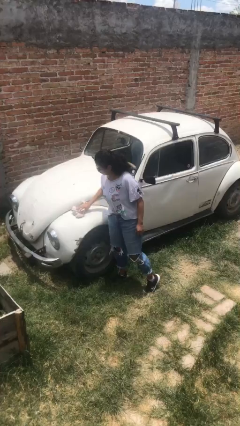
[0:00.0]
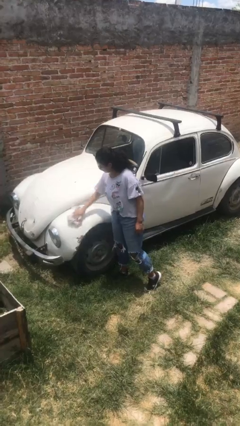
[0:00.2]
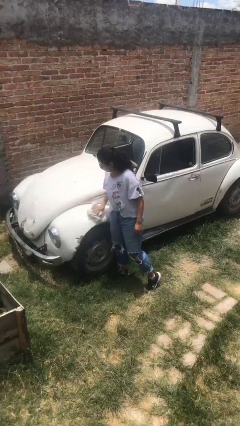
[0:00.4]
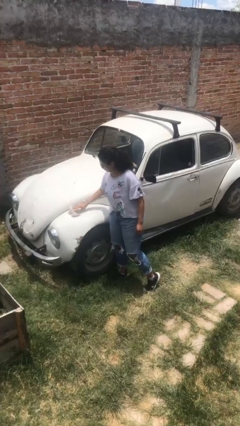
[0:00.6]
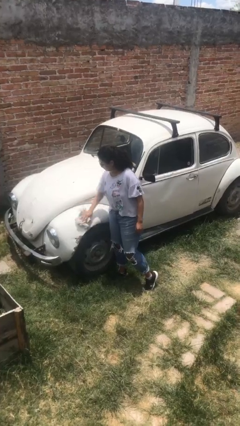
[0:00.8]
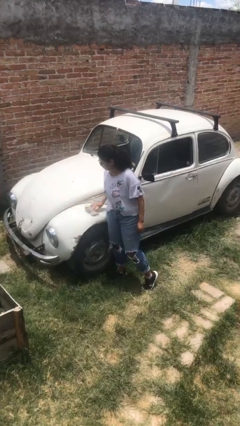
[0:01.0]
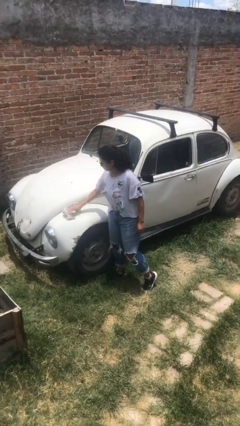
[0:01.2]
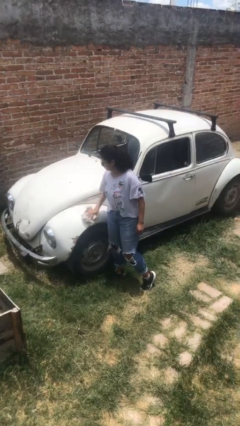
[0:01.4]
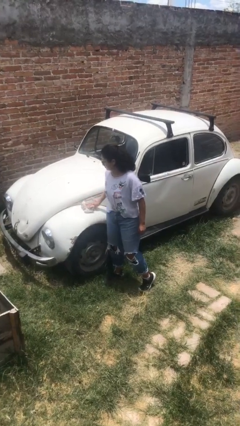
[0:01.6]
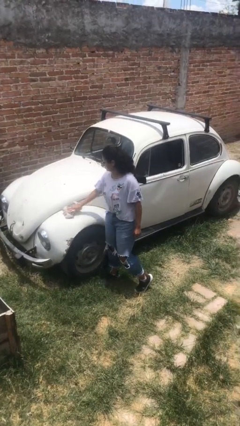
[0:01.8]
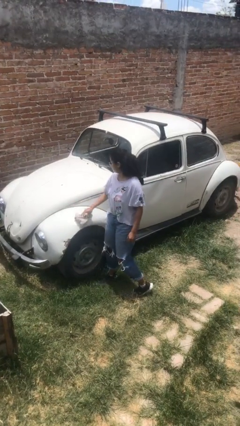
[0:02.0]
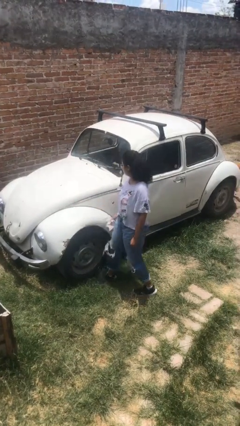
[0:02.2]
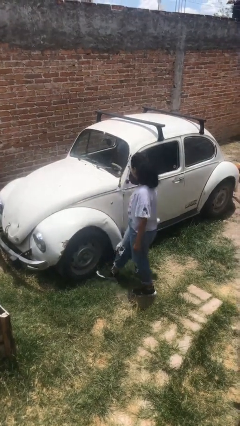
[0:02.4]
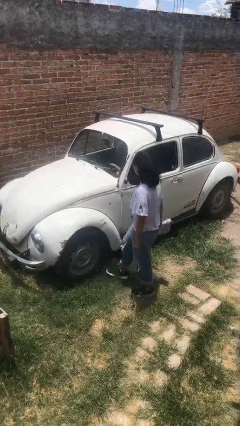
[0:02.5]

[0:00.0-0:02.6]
person polishes car with rag

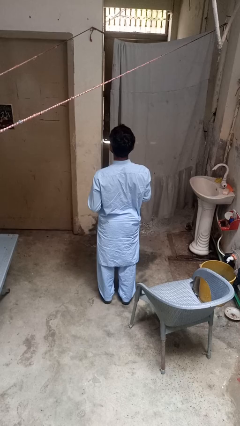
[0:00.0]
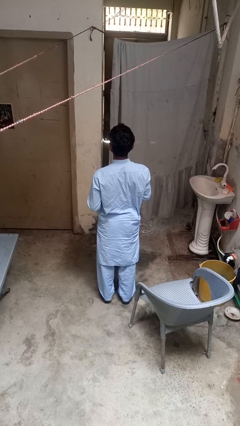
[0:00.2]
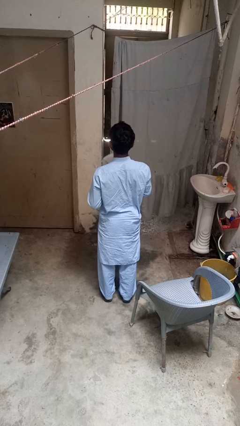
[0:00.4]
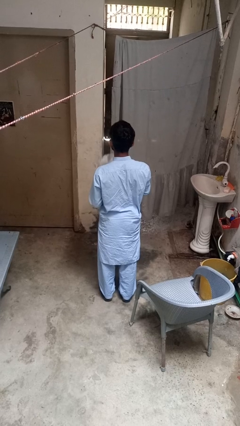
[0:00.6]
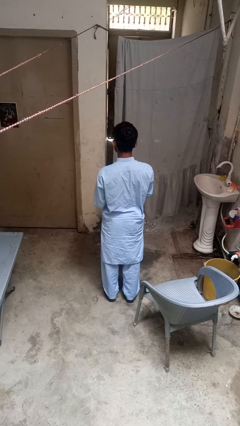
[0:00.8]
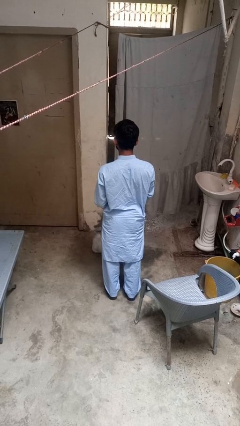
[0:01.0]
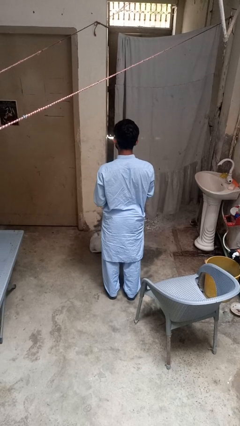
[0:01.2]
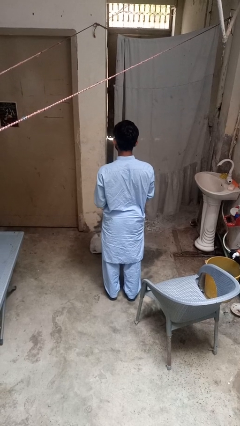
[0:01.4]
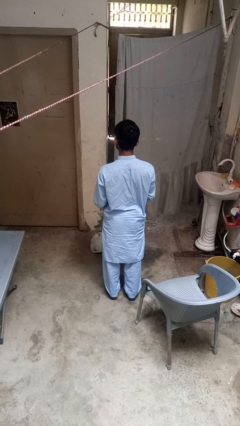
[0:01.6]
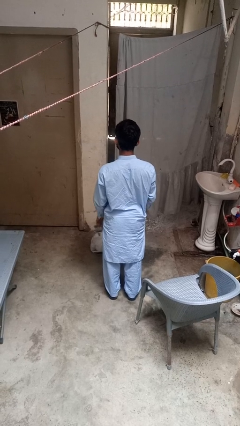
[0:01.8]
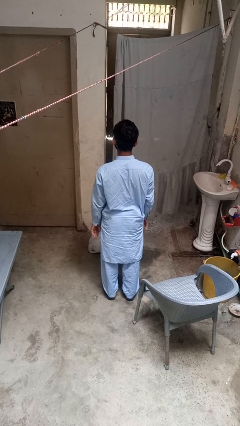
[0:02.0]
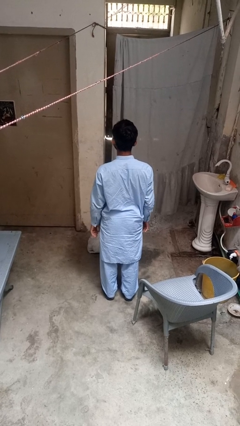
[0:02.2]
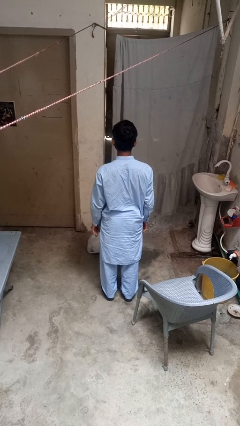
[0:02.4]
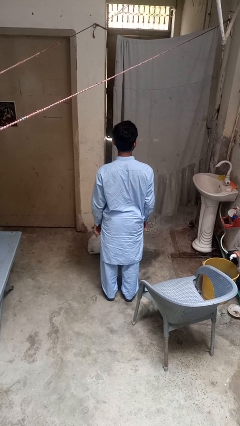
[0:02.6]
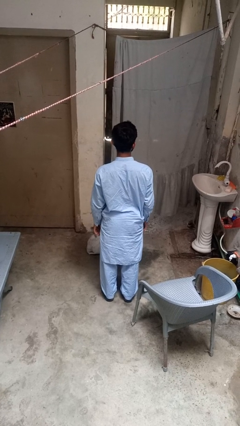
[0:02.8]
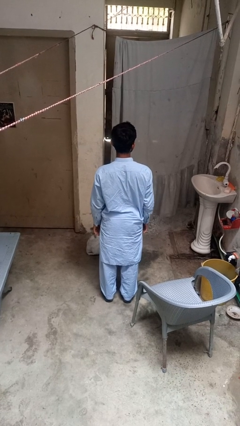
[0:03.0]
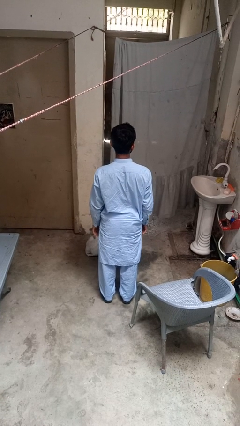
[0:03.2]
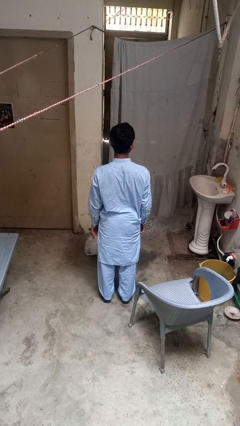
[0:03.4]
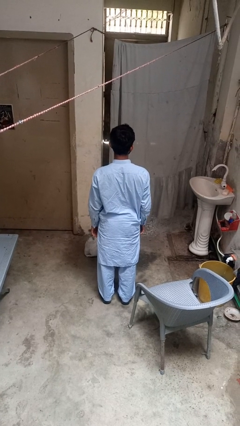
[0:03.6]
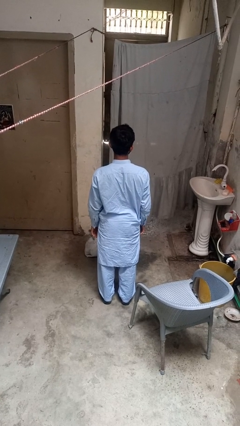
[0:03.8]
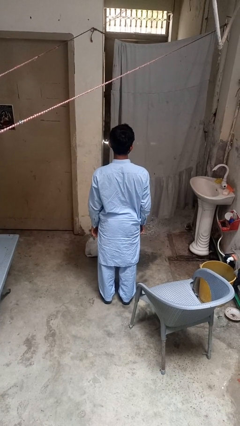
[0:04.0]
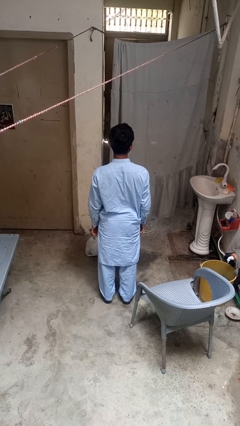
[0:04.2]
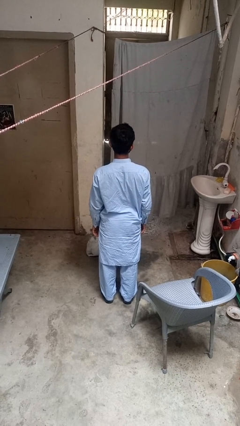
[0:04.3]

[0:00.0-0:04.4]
person throws object to ground

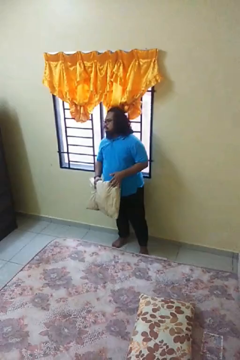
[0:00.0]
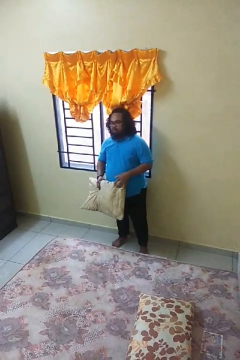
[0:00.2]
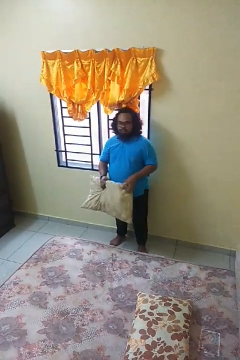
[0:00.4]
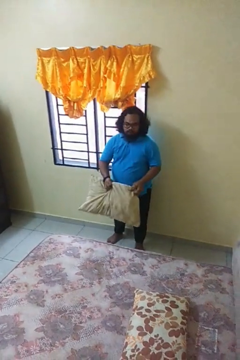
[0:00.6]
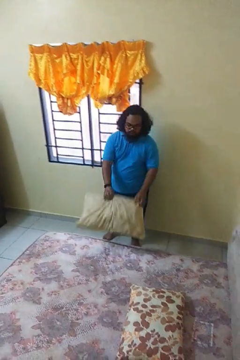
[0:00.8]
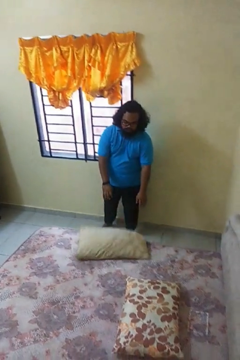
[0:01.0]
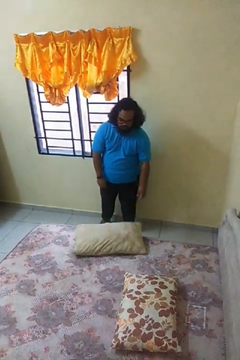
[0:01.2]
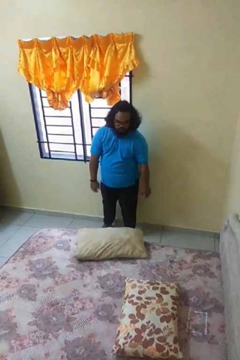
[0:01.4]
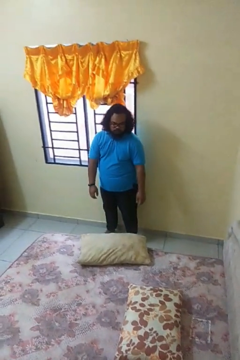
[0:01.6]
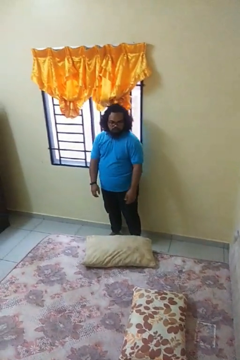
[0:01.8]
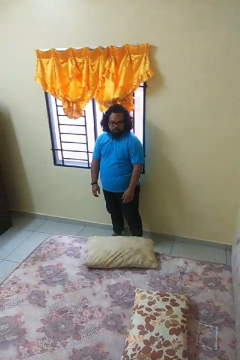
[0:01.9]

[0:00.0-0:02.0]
person puts down object on bed

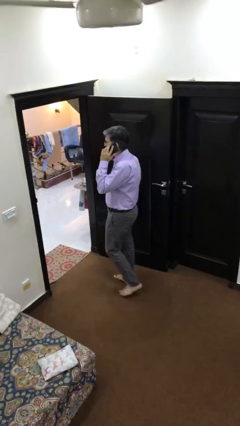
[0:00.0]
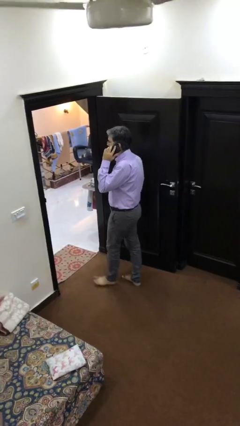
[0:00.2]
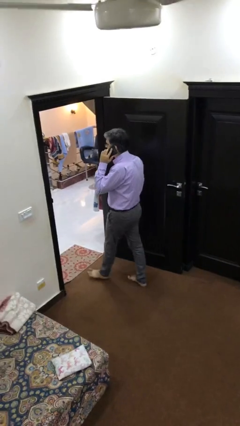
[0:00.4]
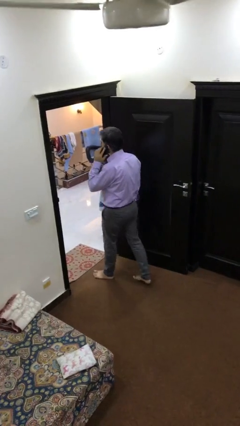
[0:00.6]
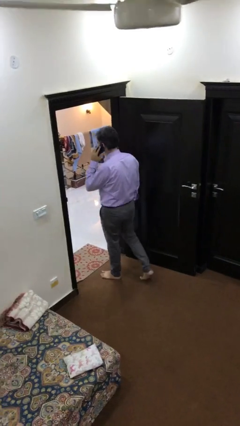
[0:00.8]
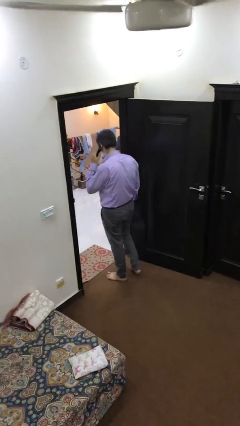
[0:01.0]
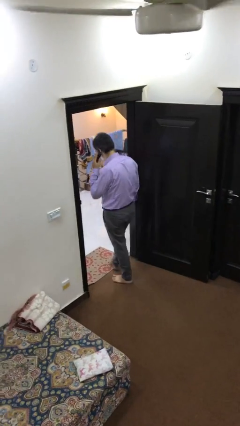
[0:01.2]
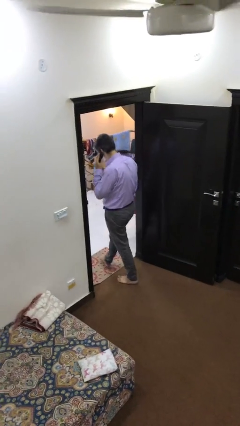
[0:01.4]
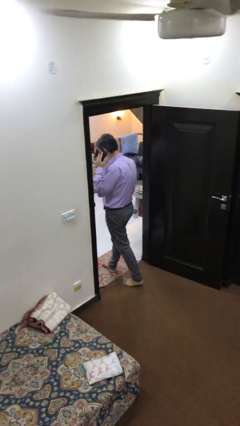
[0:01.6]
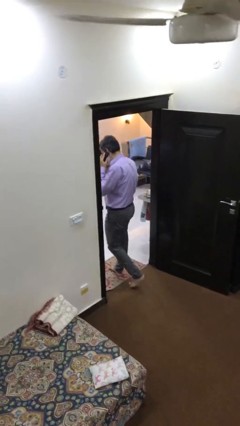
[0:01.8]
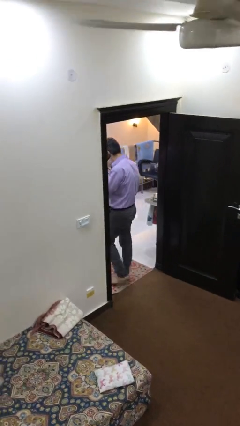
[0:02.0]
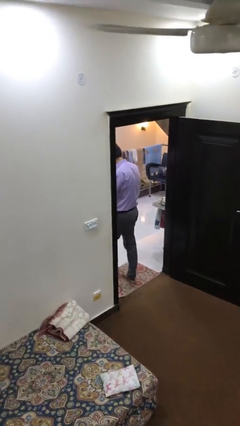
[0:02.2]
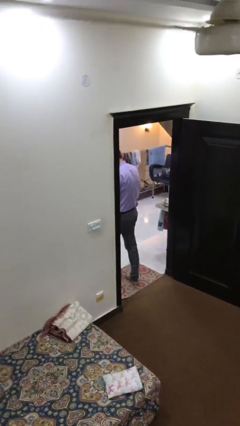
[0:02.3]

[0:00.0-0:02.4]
person exits scene through structure

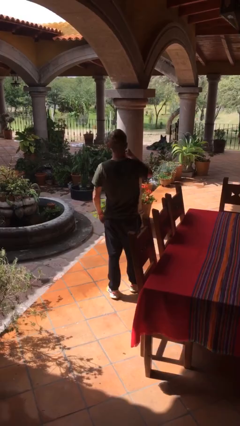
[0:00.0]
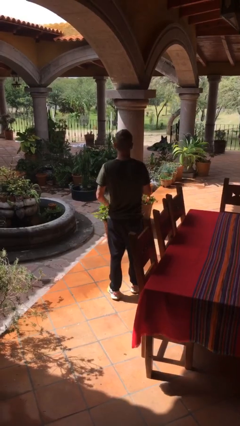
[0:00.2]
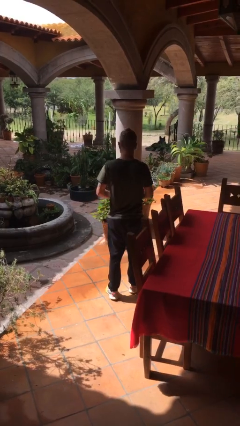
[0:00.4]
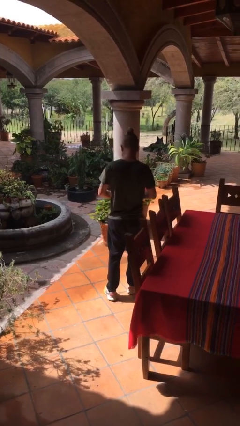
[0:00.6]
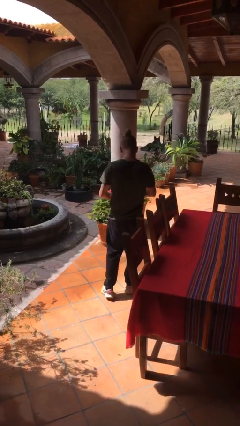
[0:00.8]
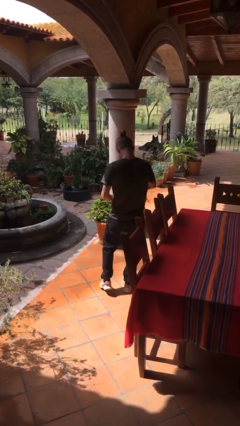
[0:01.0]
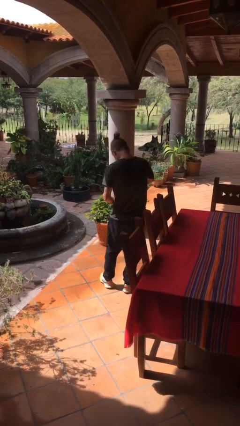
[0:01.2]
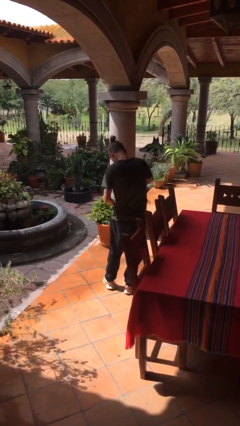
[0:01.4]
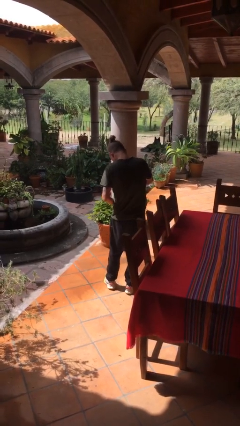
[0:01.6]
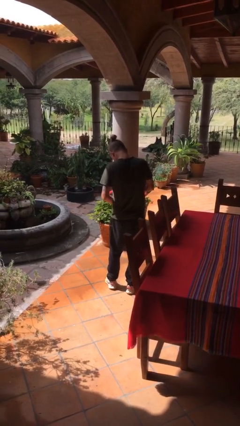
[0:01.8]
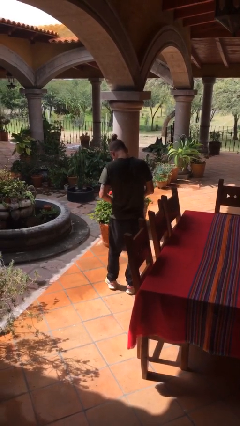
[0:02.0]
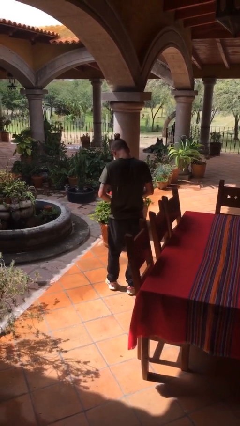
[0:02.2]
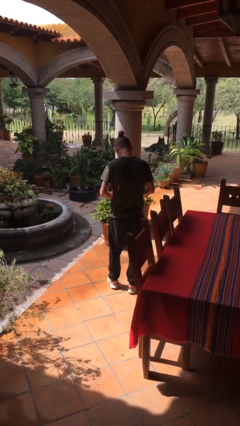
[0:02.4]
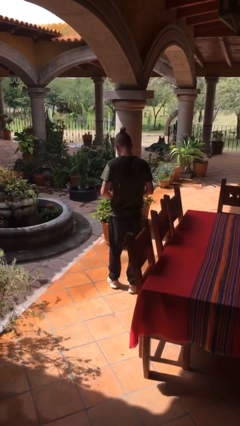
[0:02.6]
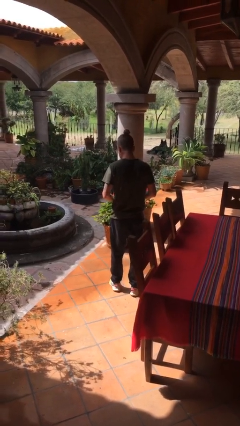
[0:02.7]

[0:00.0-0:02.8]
person opens beverage can

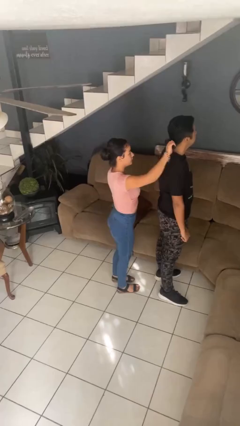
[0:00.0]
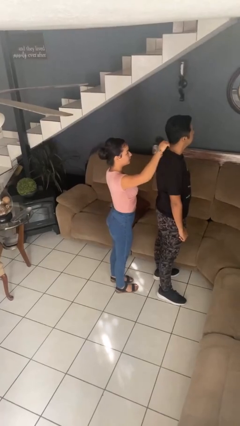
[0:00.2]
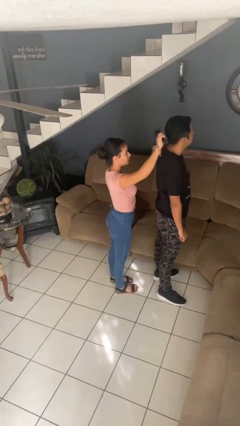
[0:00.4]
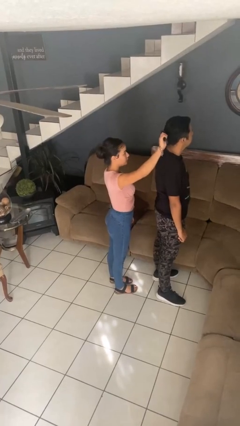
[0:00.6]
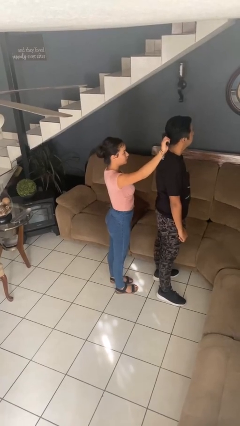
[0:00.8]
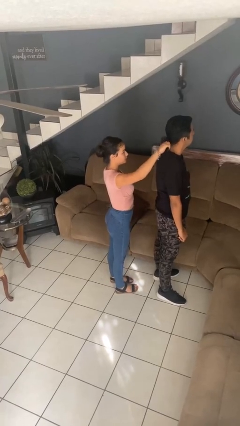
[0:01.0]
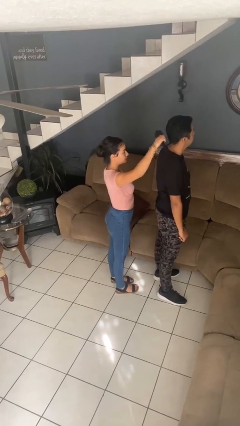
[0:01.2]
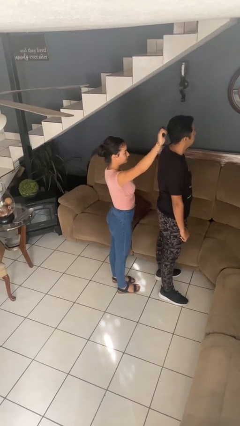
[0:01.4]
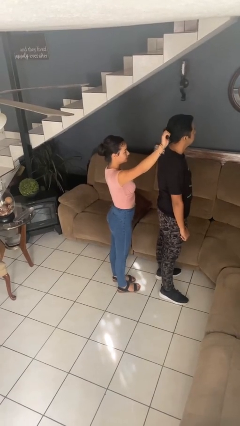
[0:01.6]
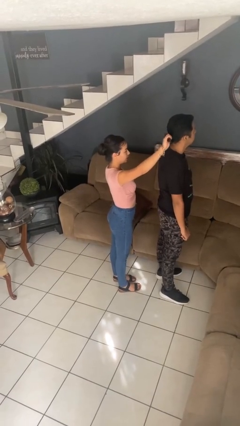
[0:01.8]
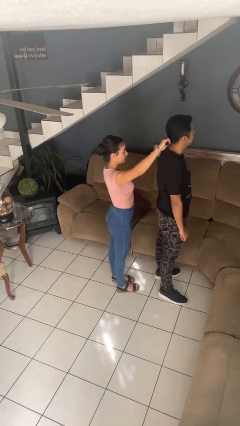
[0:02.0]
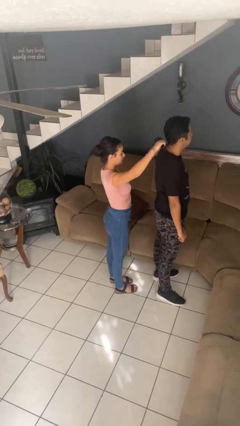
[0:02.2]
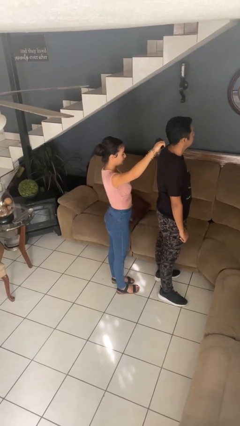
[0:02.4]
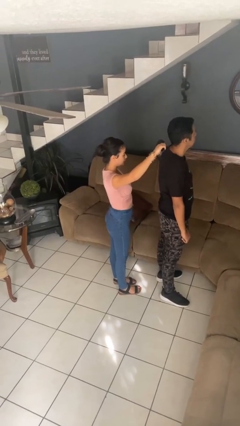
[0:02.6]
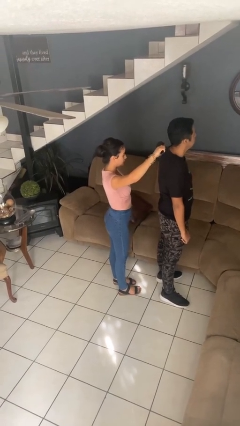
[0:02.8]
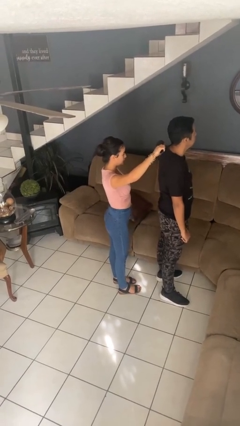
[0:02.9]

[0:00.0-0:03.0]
person brushes hair of person

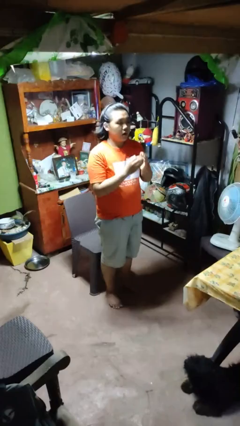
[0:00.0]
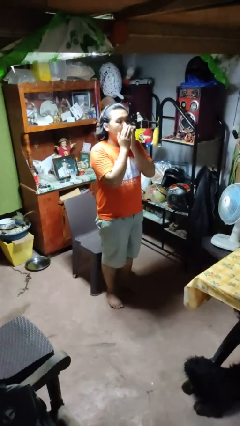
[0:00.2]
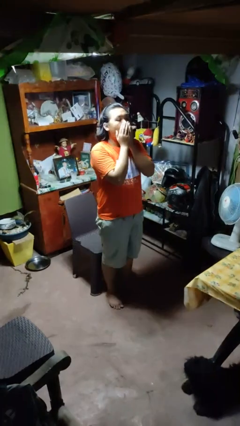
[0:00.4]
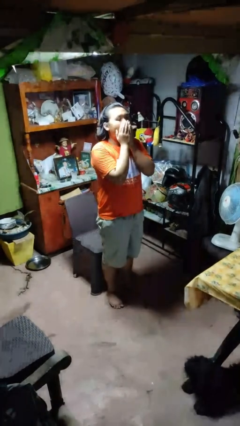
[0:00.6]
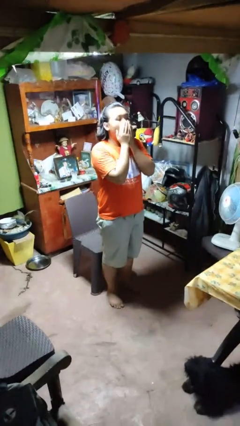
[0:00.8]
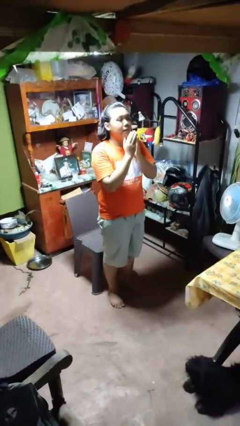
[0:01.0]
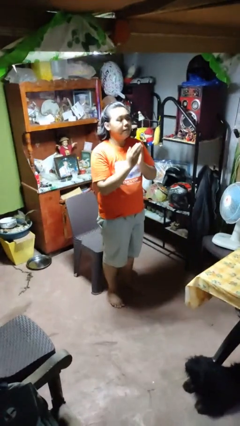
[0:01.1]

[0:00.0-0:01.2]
person yawns
